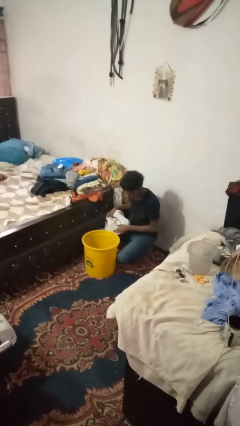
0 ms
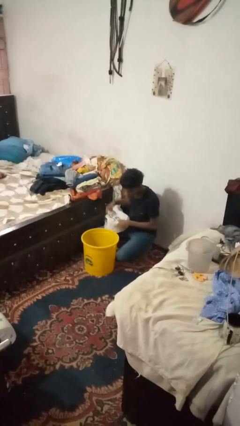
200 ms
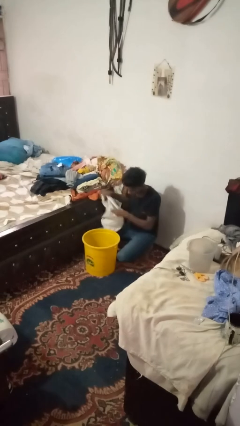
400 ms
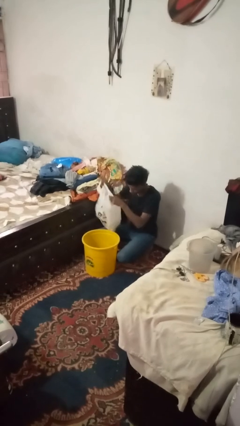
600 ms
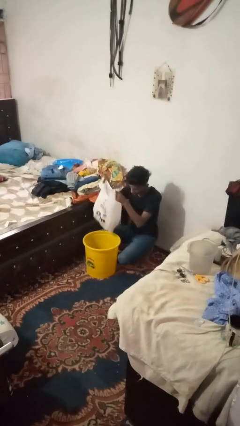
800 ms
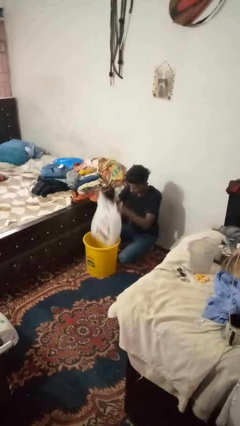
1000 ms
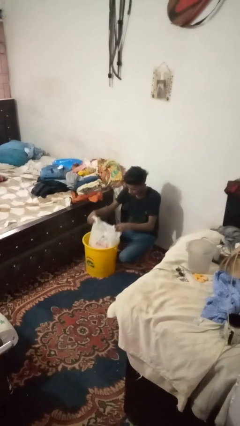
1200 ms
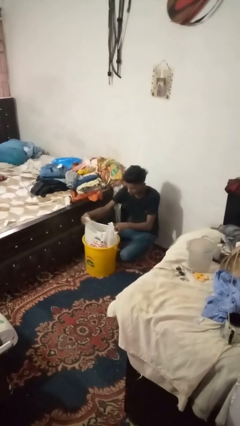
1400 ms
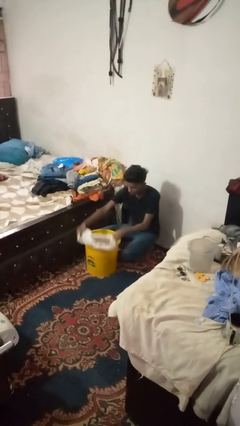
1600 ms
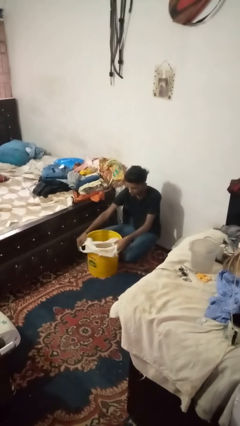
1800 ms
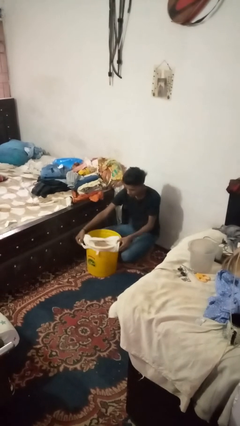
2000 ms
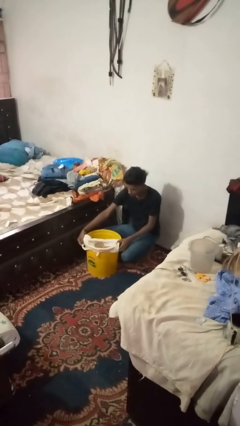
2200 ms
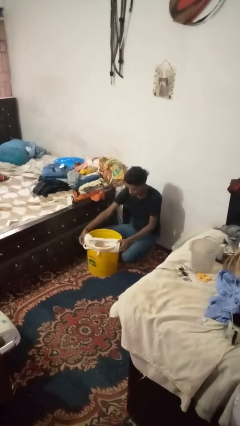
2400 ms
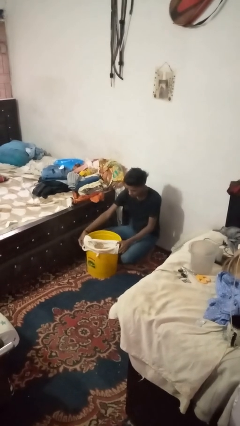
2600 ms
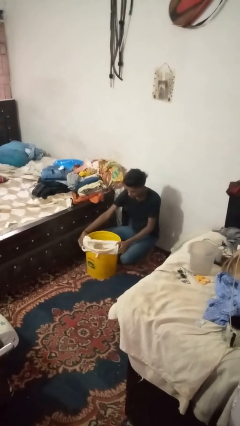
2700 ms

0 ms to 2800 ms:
person inserts trashbag into trashcan

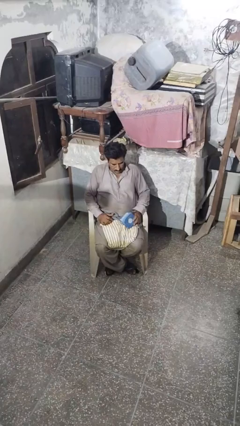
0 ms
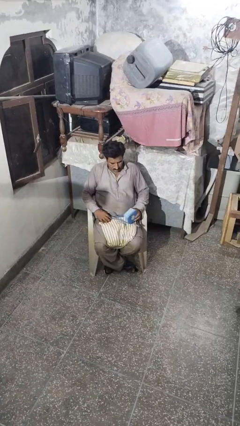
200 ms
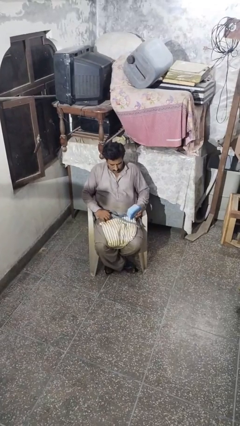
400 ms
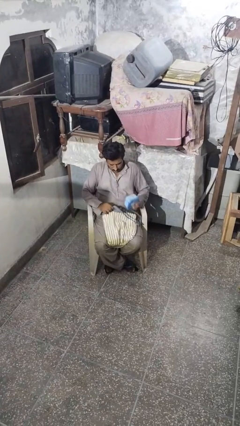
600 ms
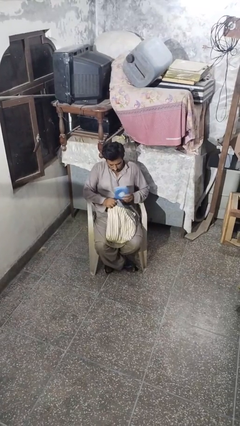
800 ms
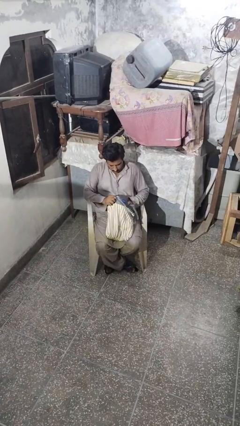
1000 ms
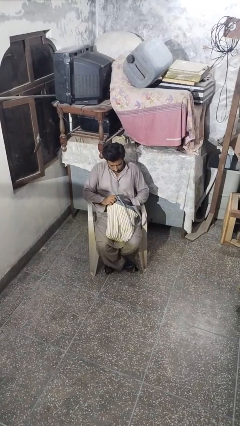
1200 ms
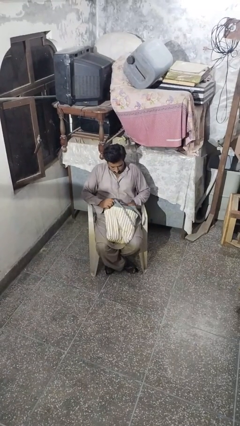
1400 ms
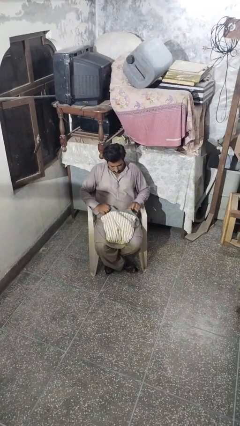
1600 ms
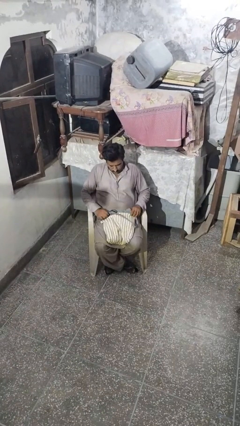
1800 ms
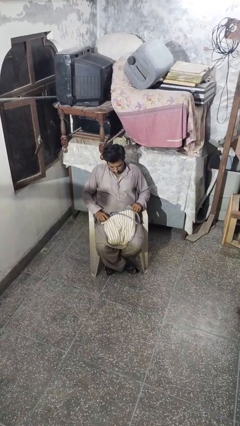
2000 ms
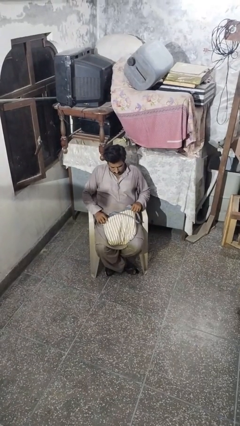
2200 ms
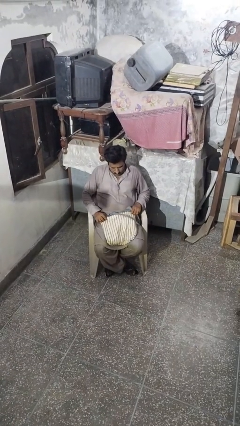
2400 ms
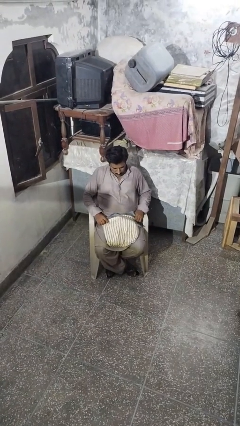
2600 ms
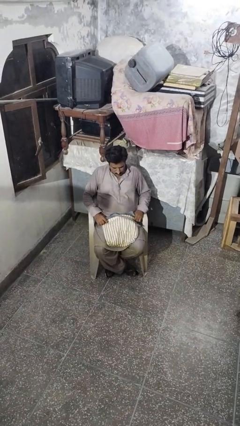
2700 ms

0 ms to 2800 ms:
person puts object into backpack

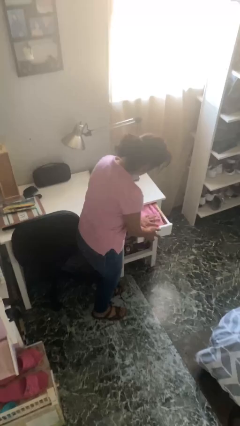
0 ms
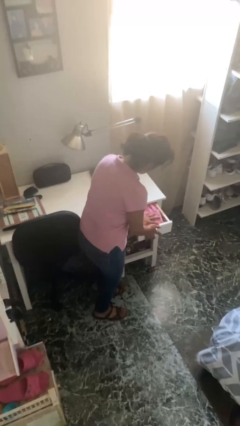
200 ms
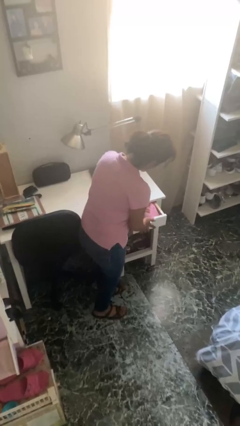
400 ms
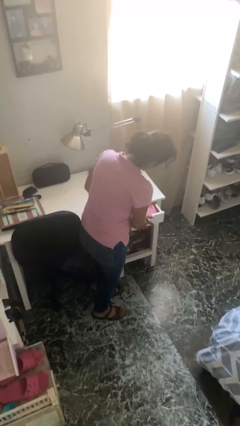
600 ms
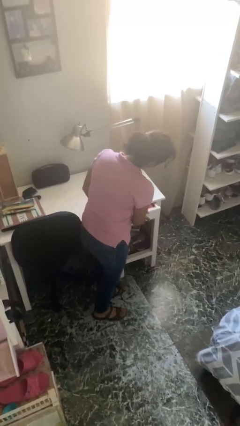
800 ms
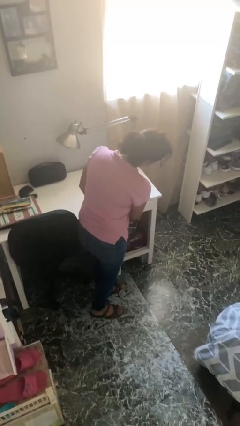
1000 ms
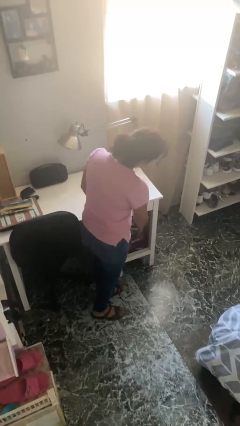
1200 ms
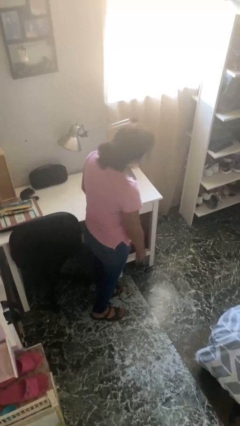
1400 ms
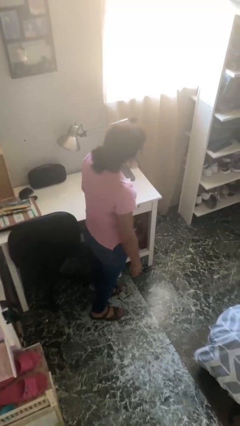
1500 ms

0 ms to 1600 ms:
person closes dresser drawer

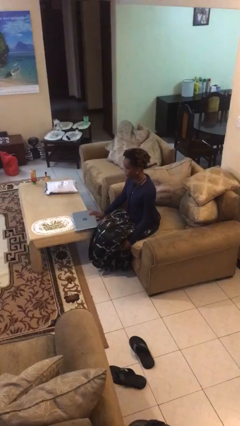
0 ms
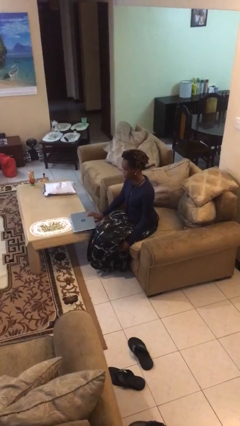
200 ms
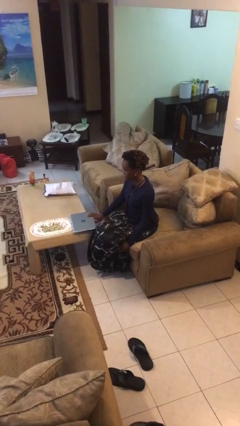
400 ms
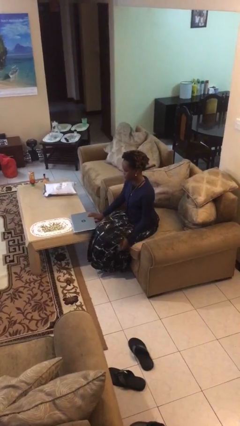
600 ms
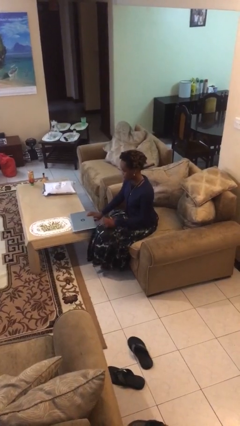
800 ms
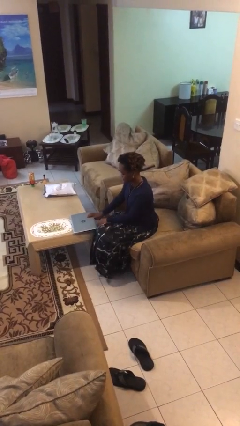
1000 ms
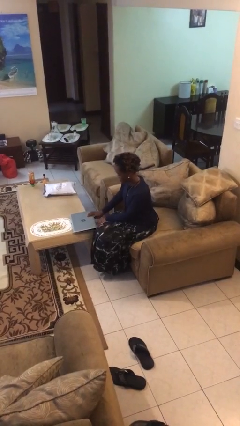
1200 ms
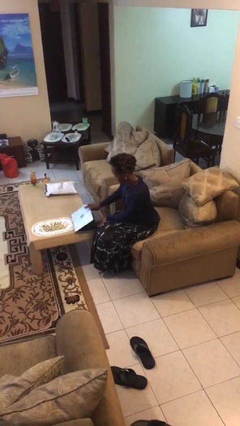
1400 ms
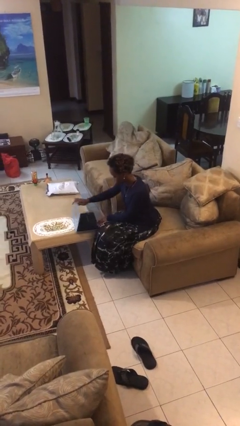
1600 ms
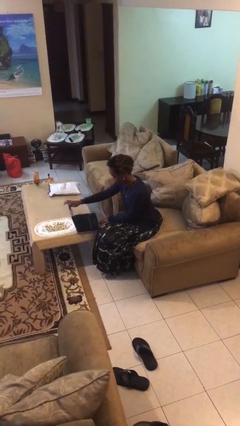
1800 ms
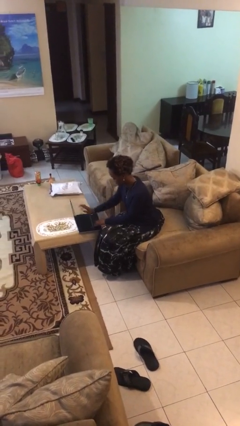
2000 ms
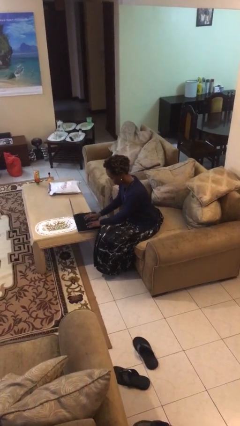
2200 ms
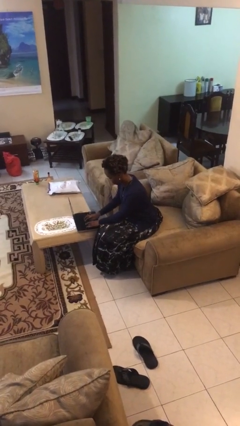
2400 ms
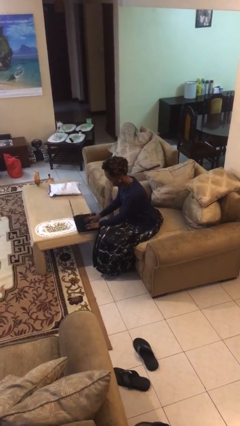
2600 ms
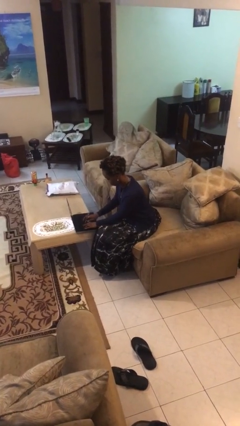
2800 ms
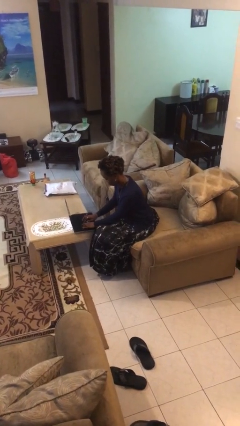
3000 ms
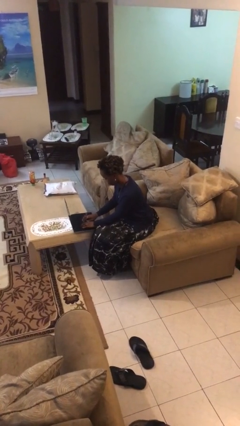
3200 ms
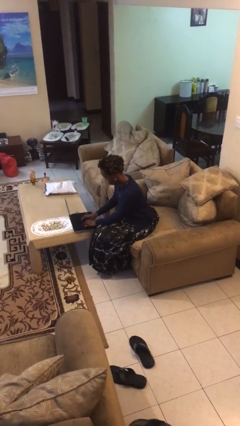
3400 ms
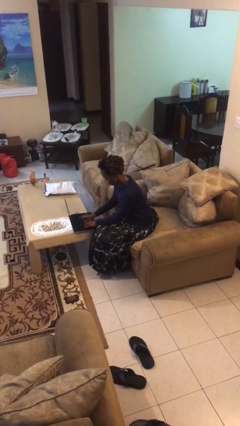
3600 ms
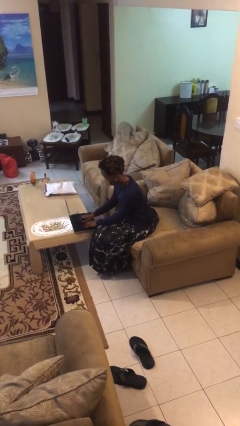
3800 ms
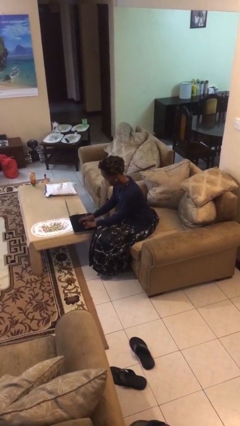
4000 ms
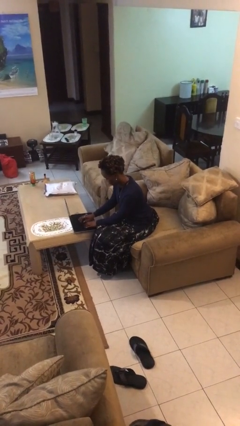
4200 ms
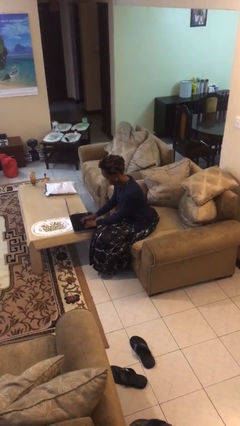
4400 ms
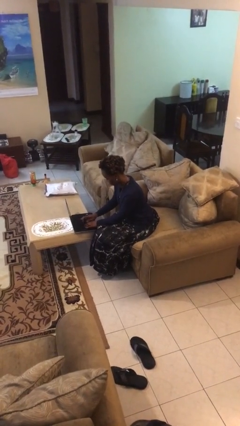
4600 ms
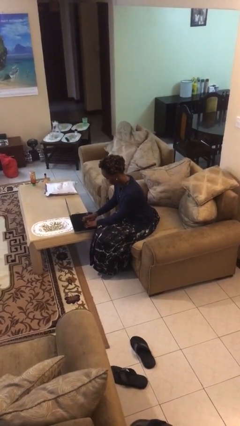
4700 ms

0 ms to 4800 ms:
person interacts with laptop

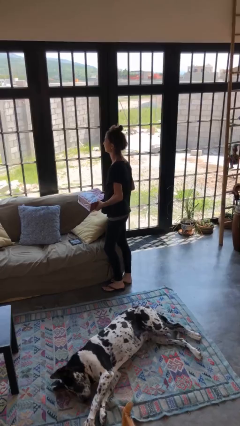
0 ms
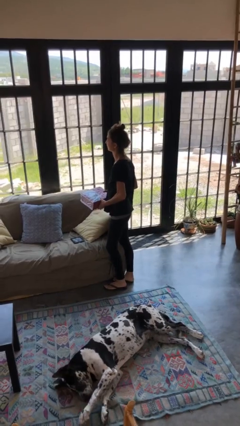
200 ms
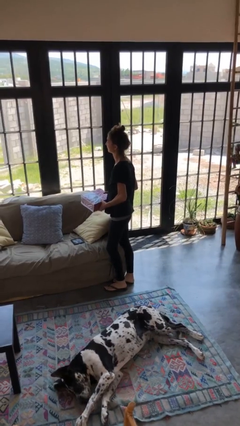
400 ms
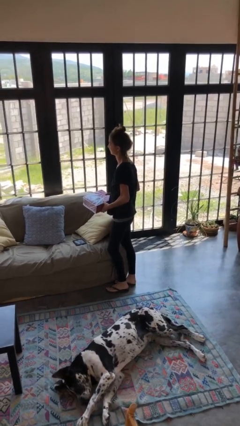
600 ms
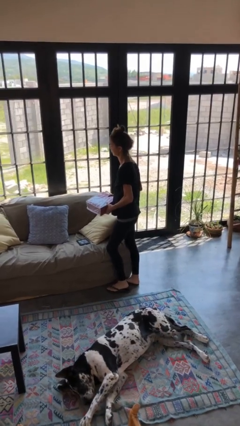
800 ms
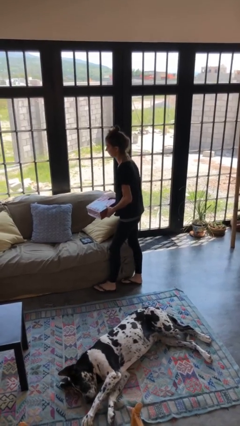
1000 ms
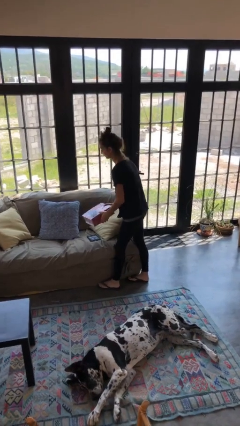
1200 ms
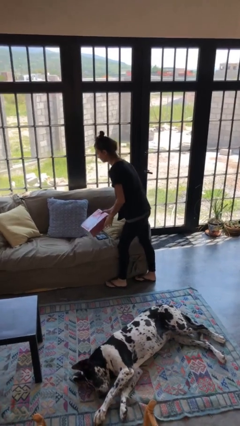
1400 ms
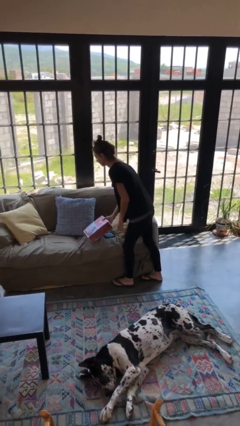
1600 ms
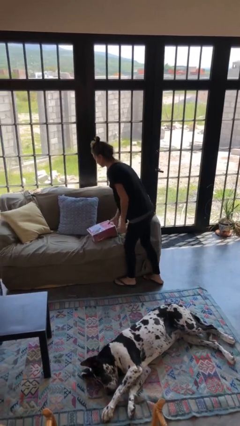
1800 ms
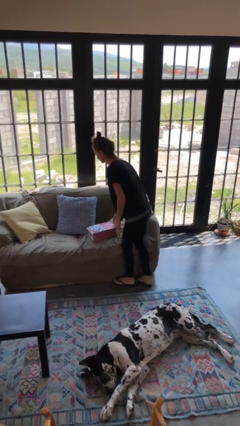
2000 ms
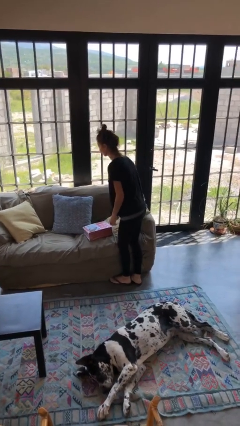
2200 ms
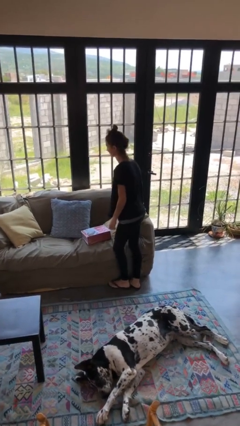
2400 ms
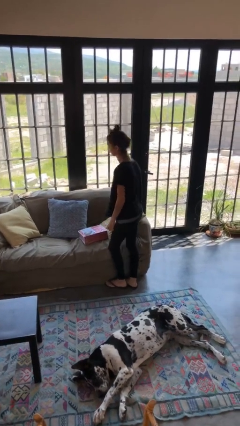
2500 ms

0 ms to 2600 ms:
person puts down object on couch

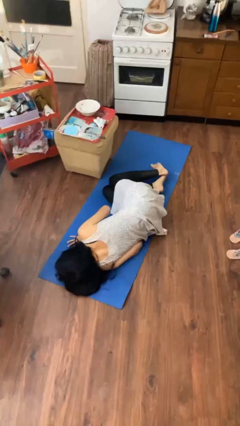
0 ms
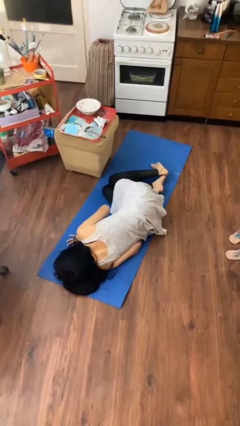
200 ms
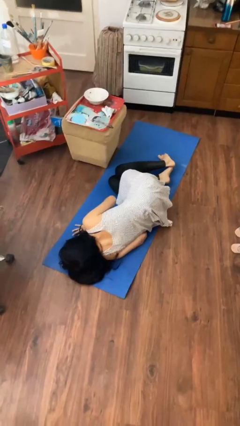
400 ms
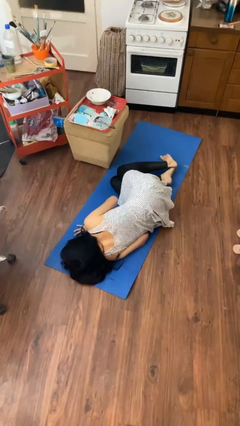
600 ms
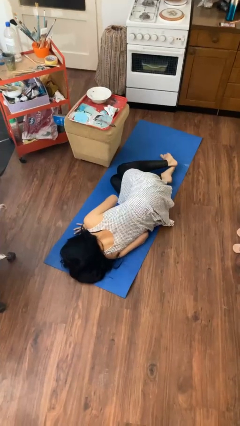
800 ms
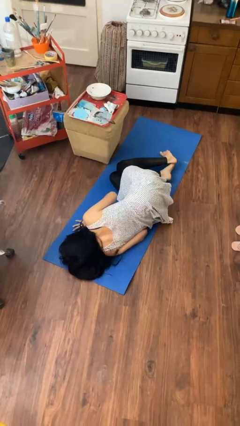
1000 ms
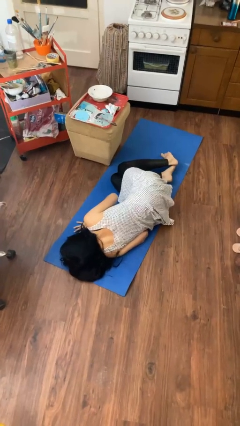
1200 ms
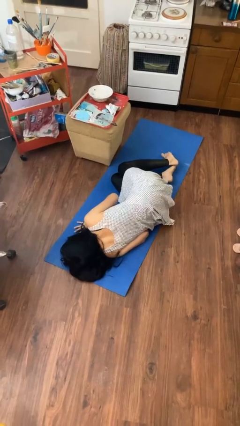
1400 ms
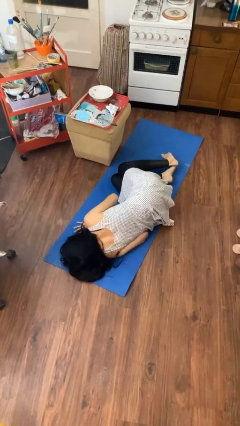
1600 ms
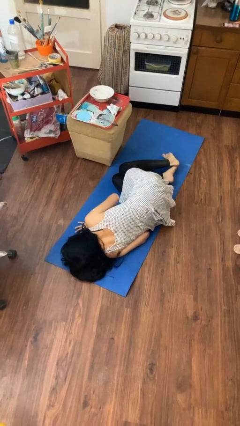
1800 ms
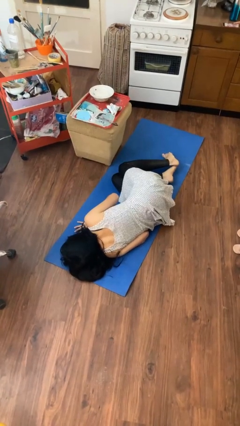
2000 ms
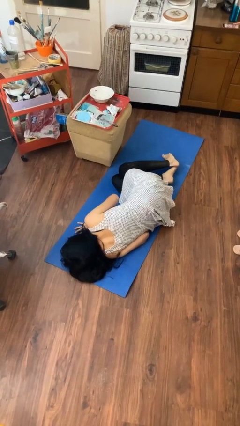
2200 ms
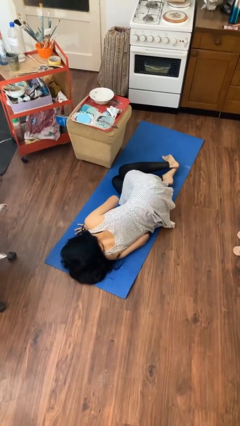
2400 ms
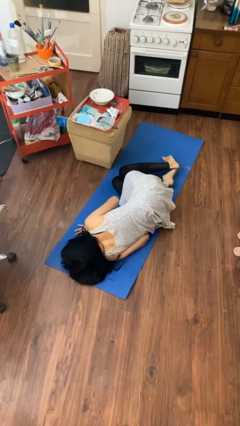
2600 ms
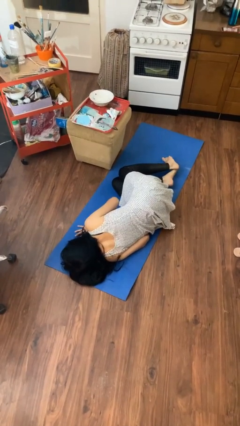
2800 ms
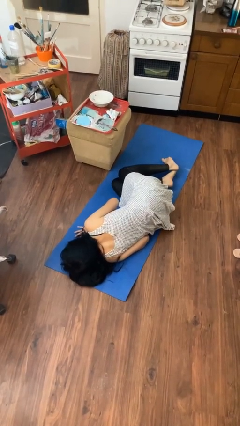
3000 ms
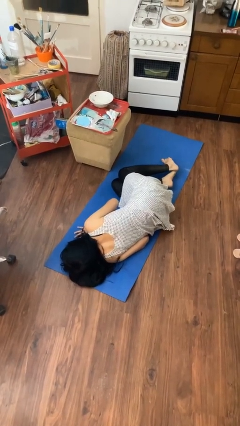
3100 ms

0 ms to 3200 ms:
person lies down on floor

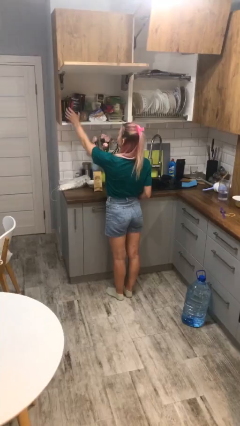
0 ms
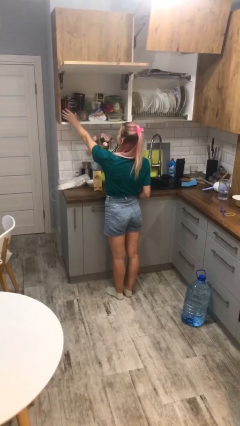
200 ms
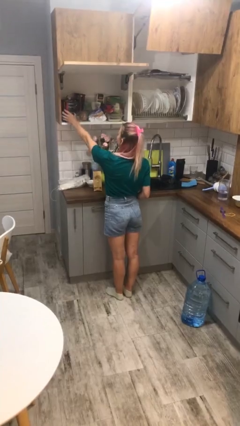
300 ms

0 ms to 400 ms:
person puts down object into cabinet
